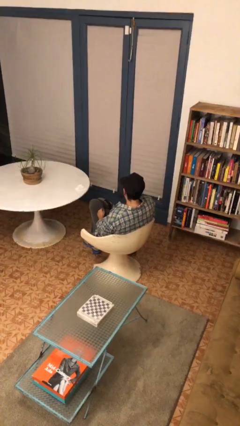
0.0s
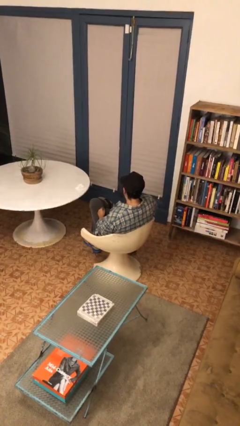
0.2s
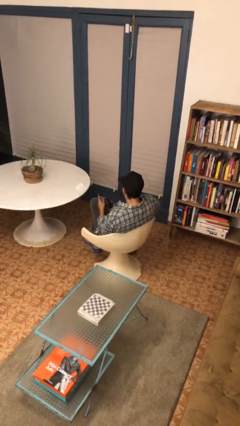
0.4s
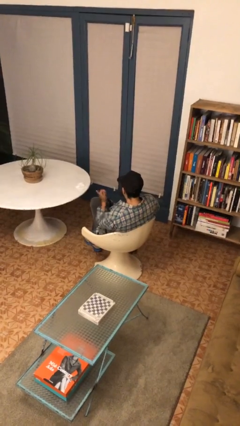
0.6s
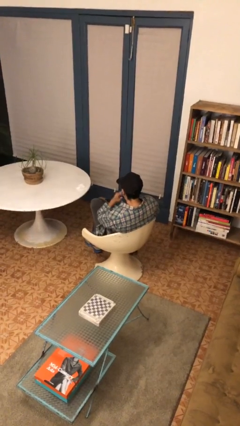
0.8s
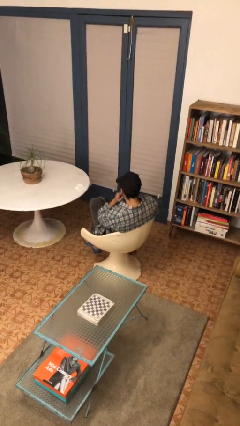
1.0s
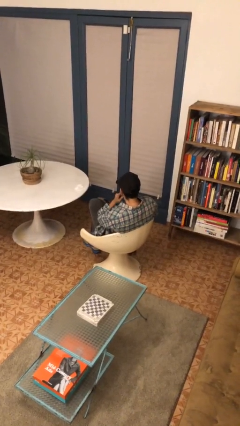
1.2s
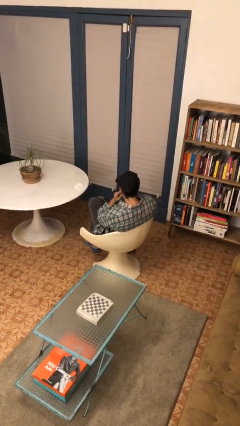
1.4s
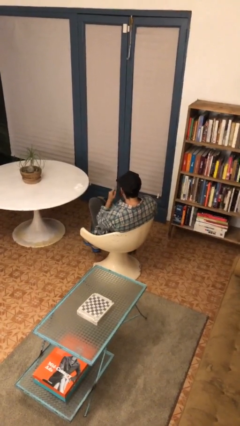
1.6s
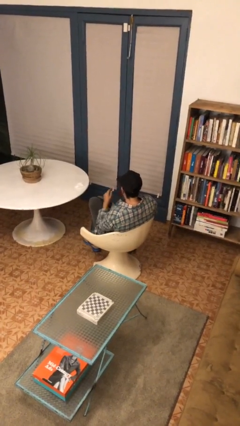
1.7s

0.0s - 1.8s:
person gestures listen closely

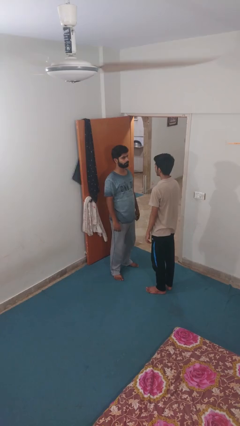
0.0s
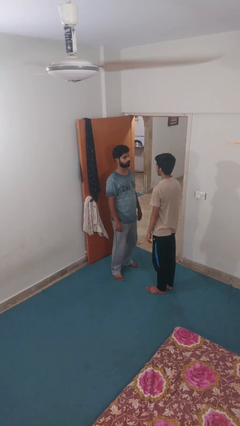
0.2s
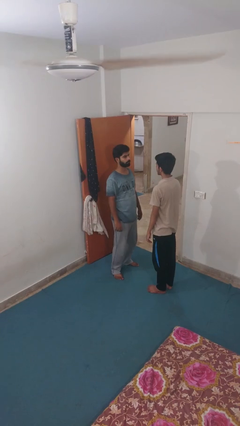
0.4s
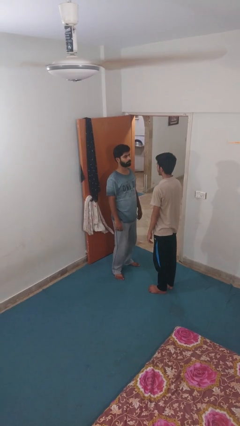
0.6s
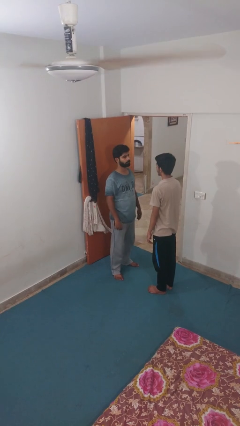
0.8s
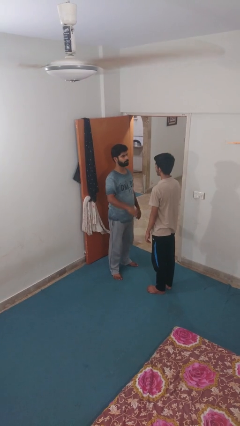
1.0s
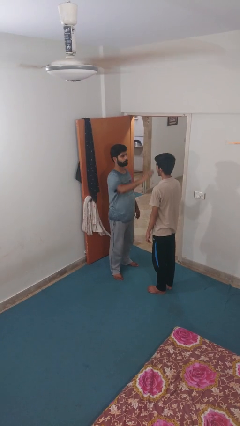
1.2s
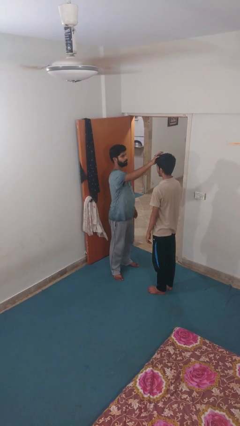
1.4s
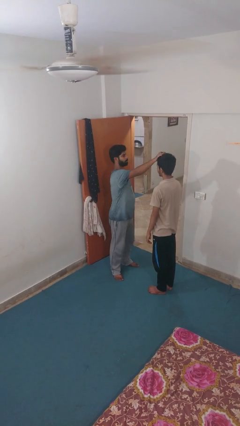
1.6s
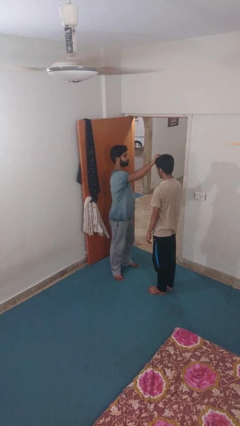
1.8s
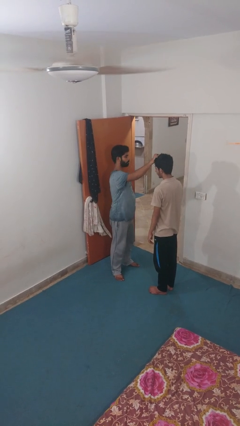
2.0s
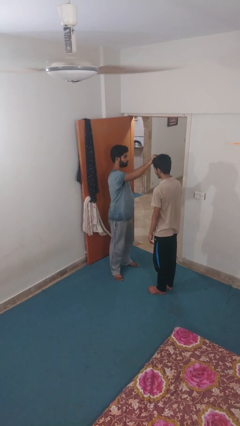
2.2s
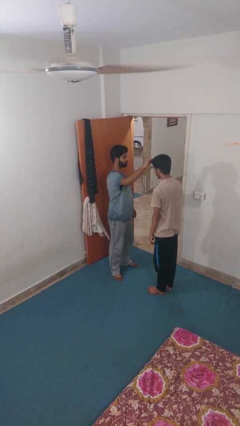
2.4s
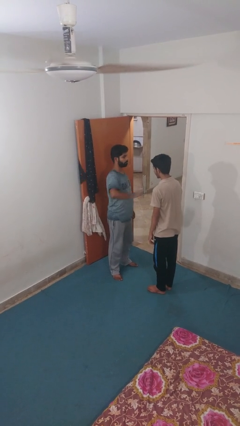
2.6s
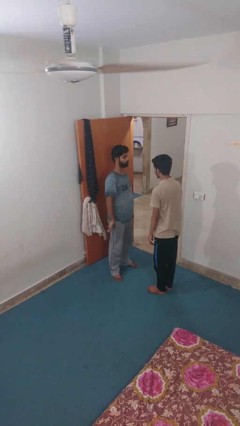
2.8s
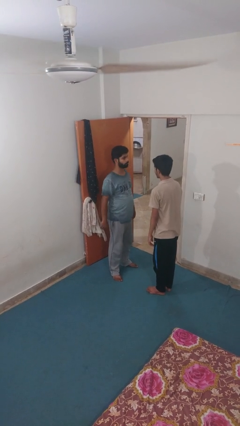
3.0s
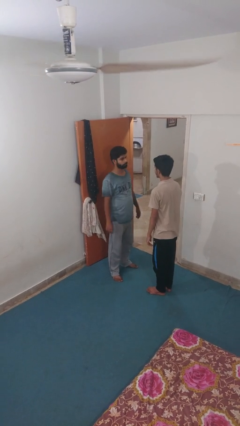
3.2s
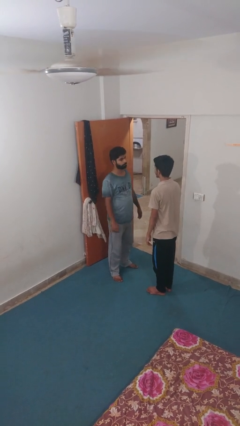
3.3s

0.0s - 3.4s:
person grabs person by hair

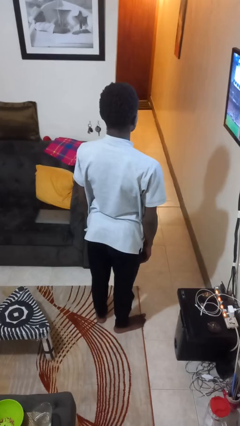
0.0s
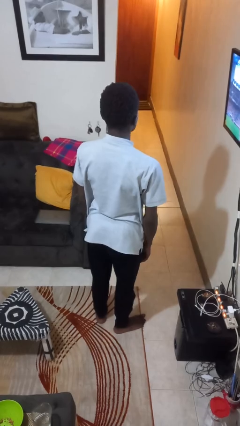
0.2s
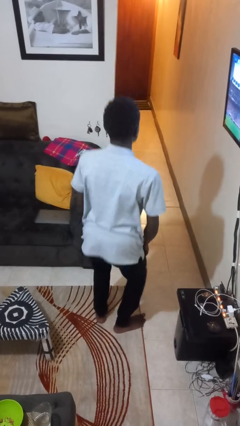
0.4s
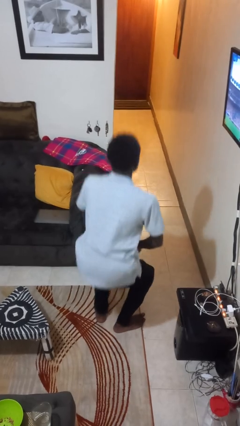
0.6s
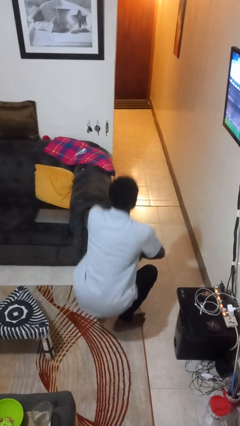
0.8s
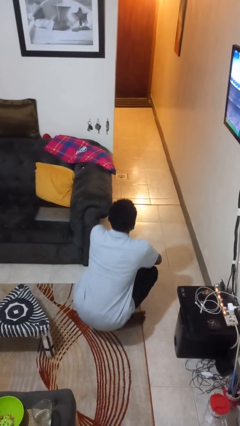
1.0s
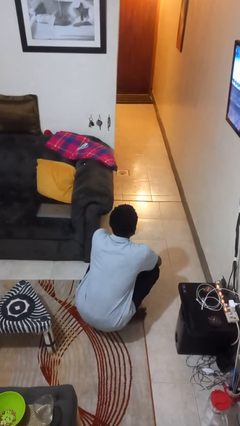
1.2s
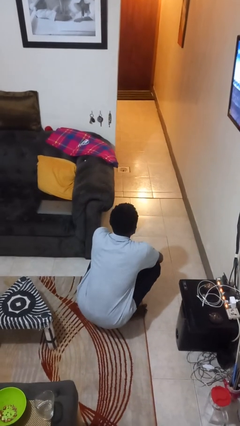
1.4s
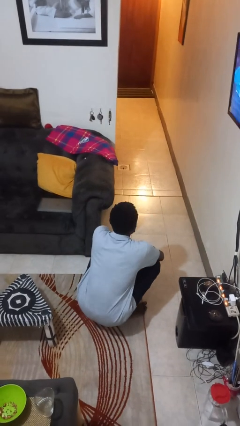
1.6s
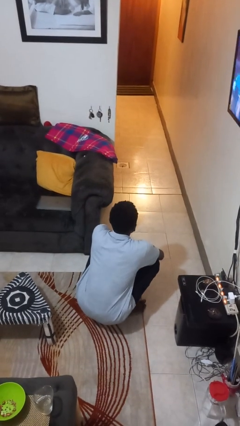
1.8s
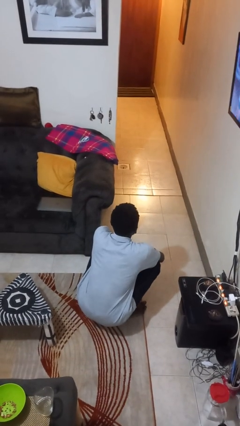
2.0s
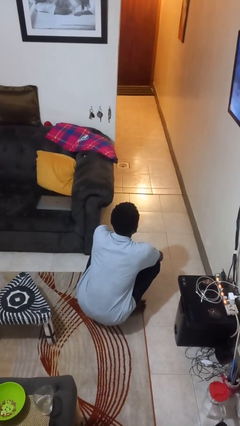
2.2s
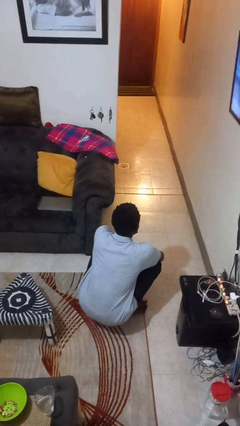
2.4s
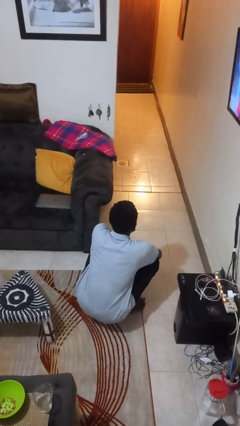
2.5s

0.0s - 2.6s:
person squats

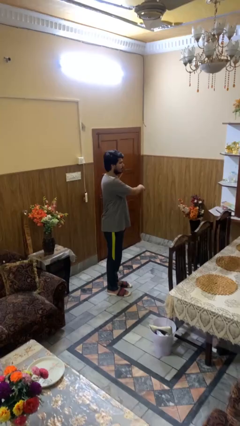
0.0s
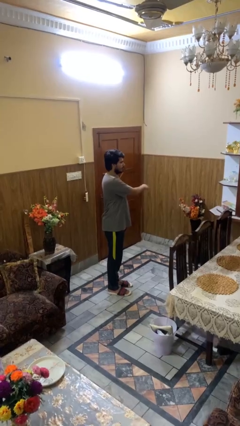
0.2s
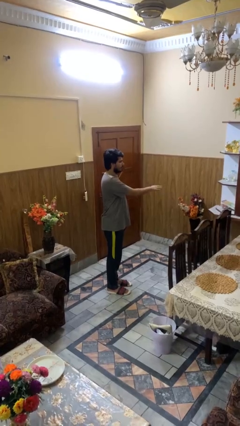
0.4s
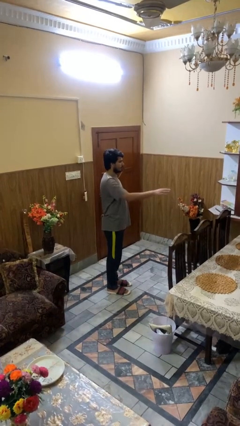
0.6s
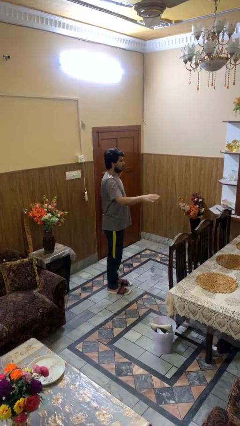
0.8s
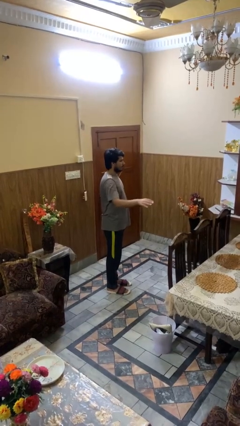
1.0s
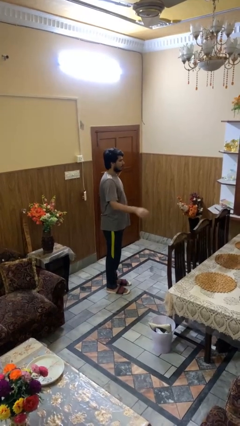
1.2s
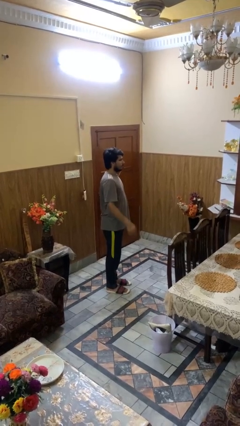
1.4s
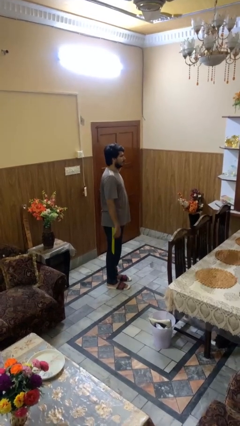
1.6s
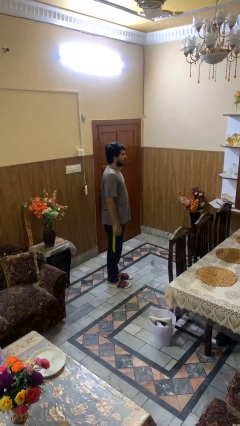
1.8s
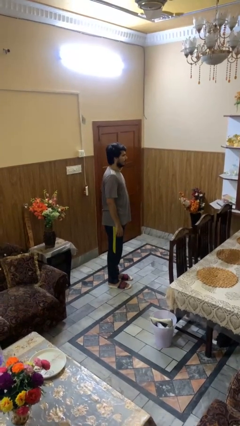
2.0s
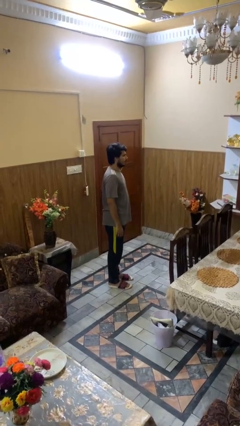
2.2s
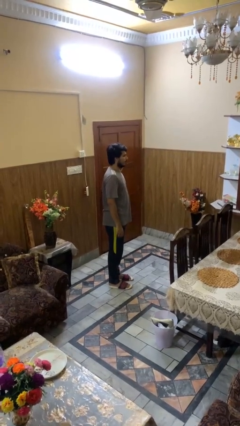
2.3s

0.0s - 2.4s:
person gestures swipe right

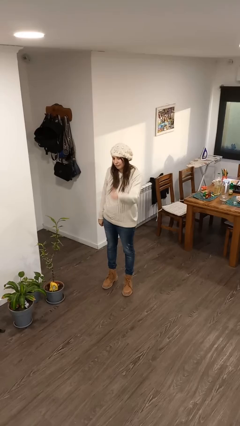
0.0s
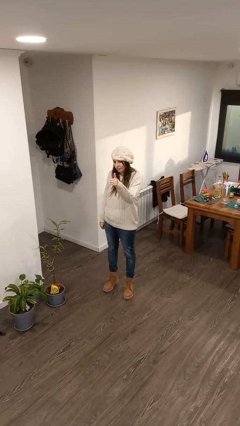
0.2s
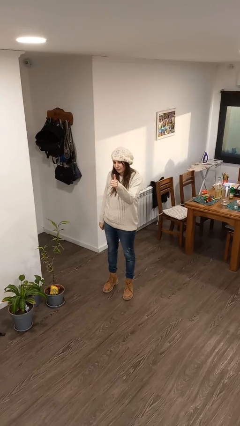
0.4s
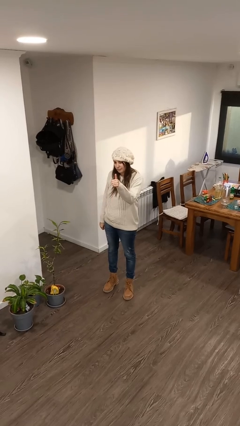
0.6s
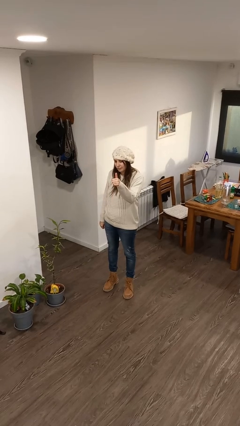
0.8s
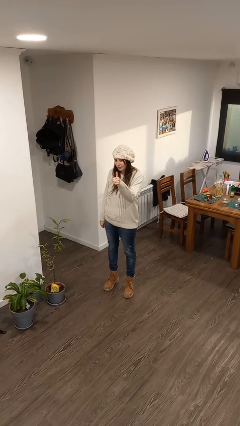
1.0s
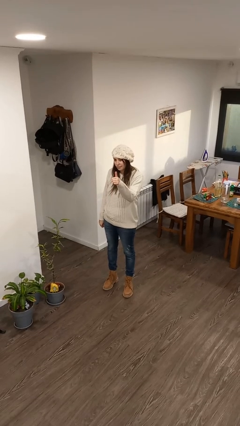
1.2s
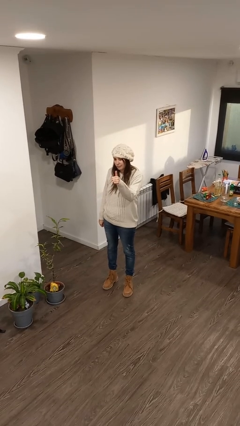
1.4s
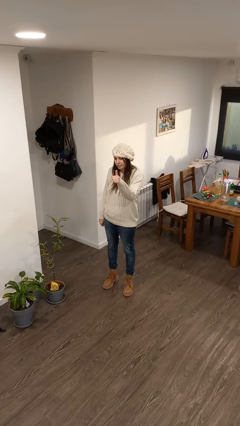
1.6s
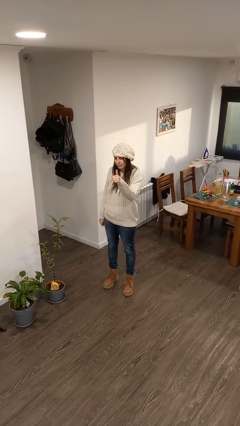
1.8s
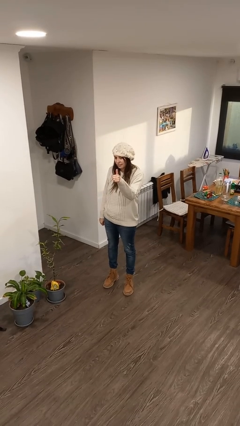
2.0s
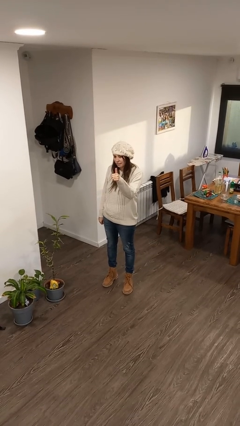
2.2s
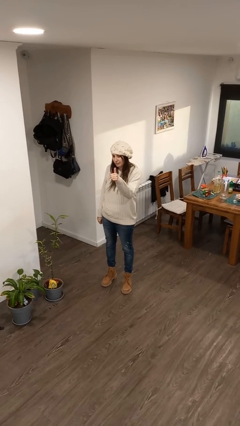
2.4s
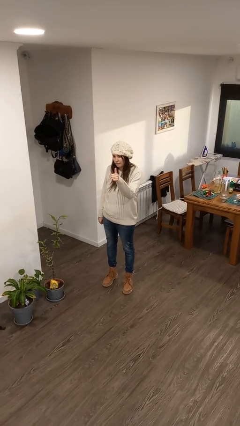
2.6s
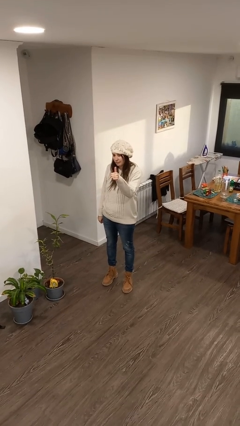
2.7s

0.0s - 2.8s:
person gestures thumbs up

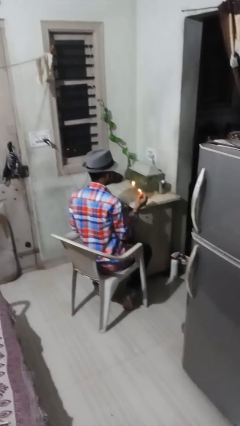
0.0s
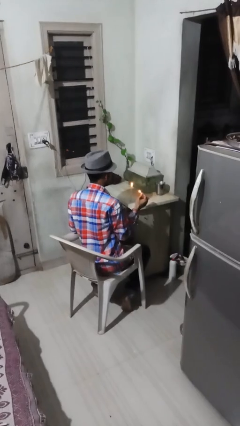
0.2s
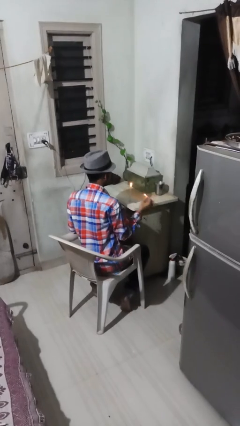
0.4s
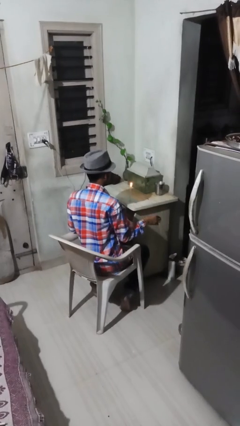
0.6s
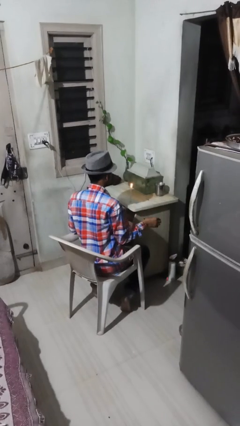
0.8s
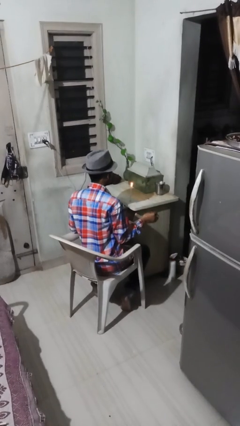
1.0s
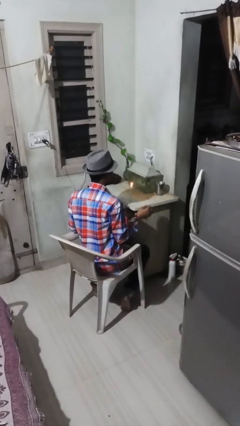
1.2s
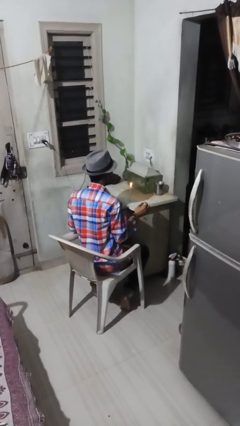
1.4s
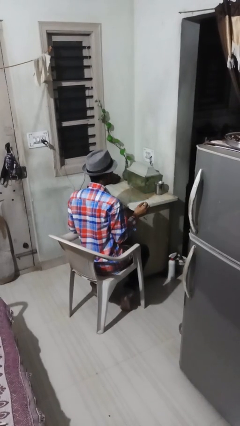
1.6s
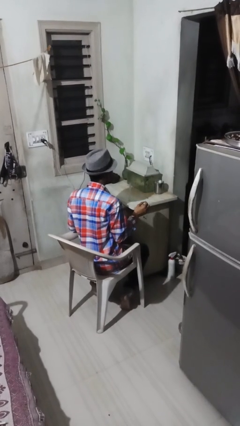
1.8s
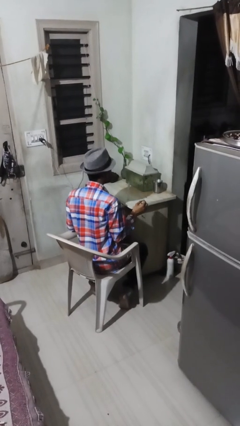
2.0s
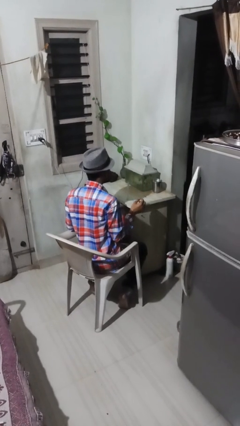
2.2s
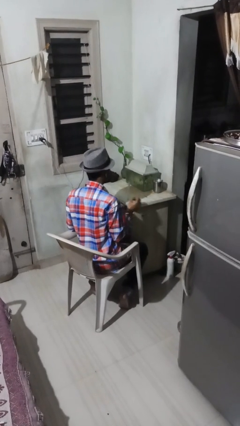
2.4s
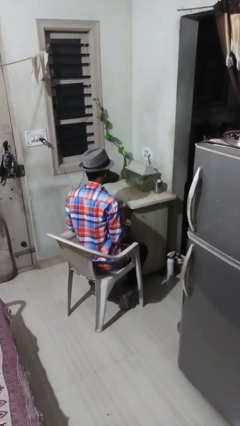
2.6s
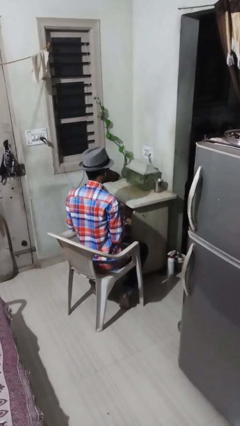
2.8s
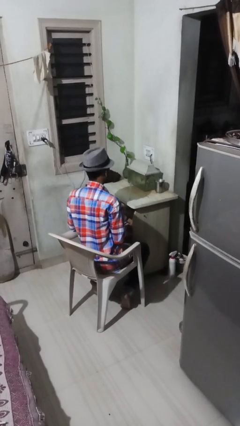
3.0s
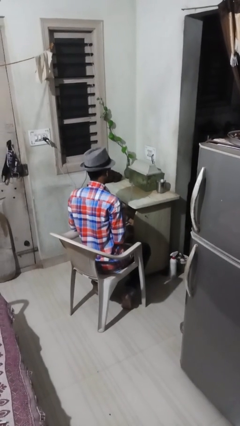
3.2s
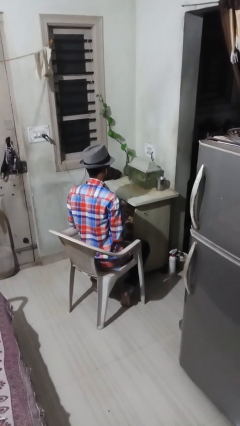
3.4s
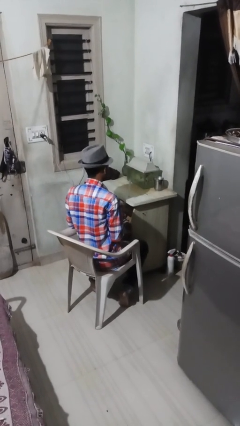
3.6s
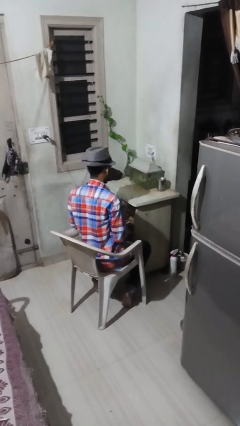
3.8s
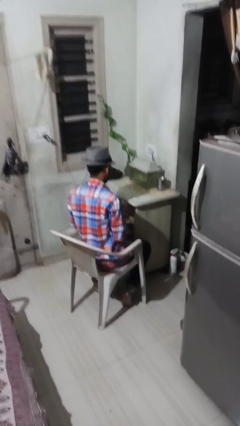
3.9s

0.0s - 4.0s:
person extinguishes candle

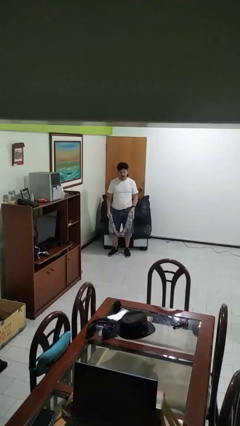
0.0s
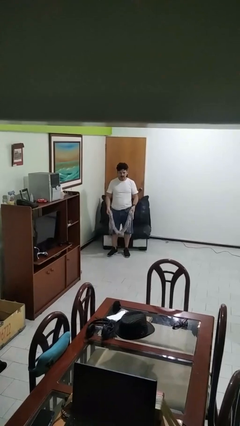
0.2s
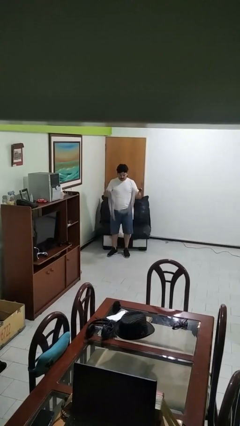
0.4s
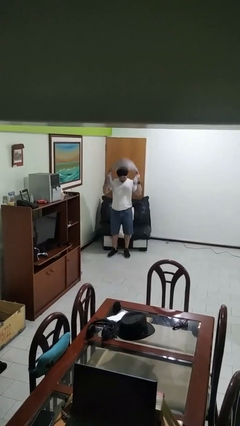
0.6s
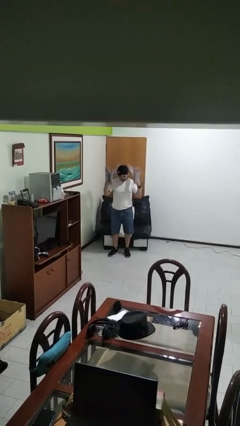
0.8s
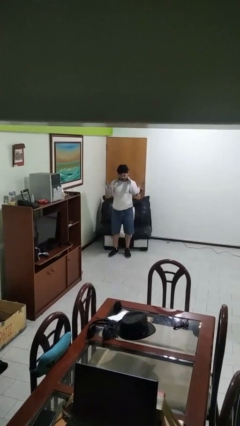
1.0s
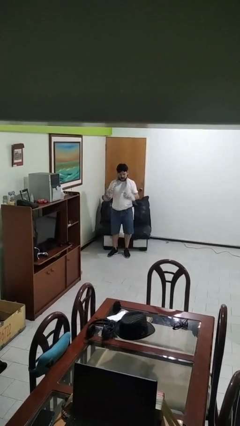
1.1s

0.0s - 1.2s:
person puts on scarf
